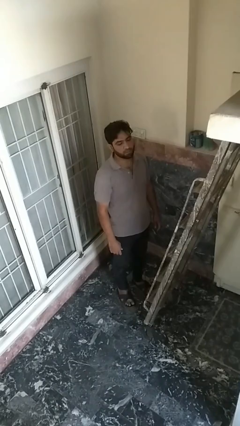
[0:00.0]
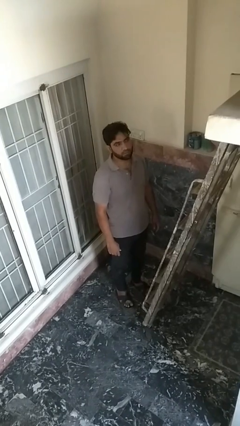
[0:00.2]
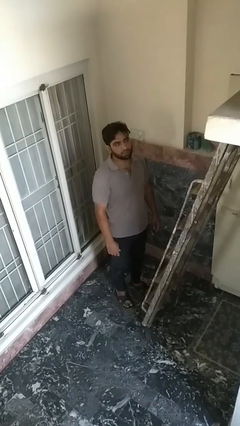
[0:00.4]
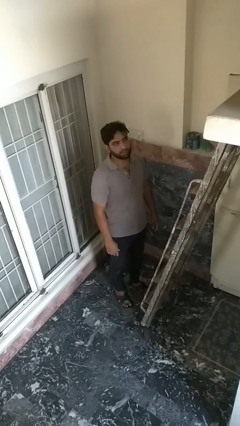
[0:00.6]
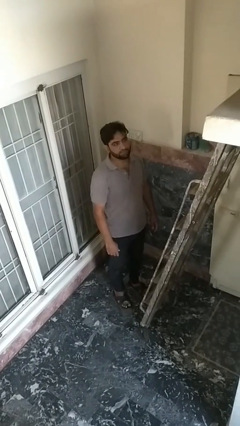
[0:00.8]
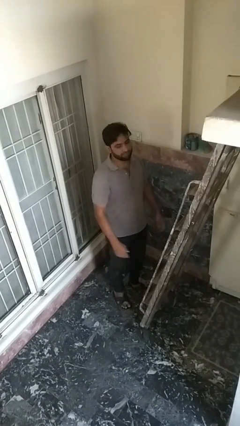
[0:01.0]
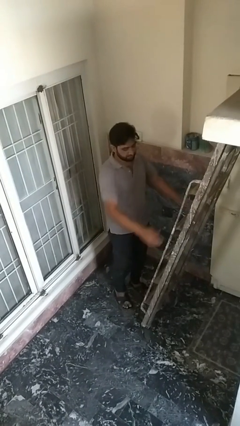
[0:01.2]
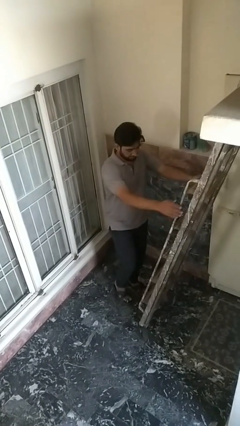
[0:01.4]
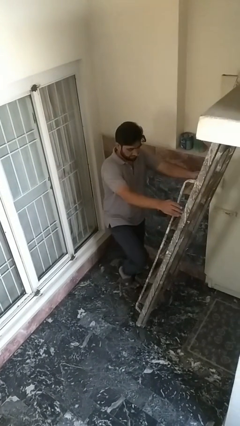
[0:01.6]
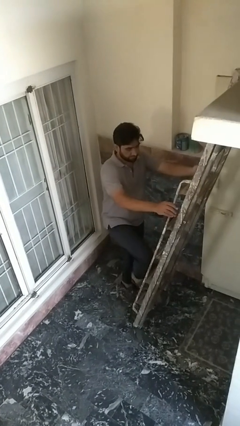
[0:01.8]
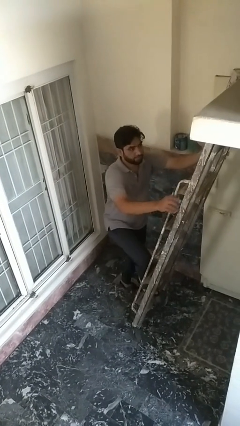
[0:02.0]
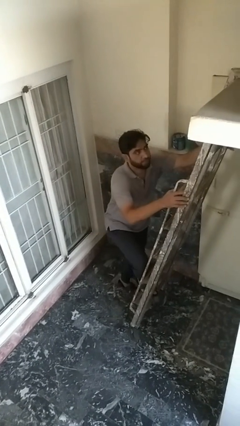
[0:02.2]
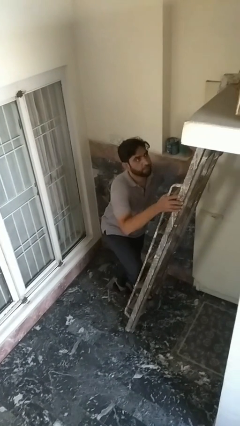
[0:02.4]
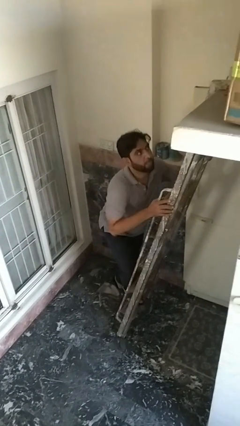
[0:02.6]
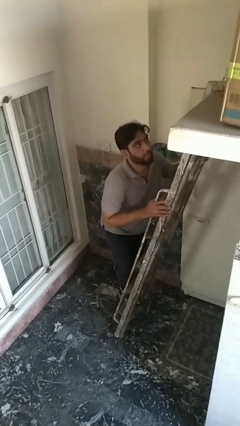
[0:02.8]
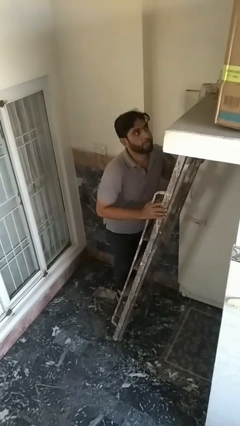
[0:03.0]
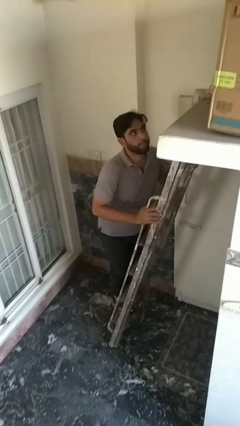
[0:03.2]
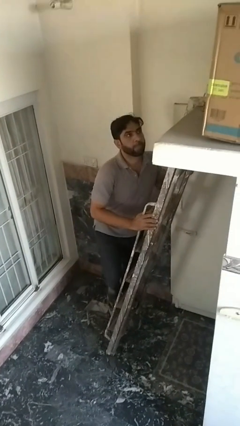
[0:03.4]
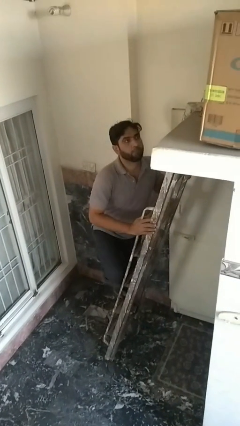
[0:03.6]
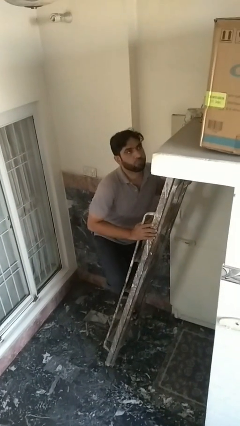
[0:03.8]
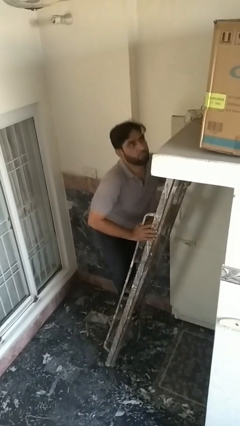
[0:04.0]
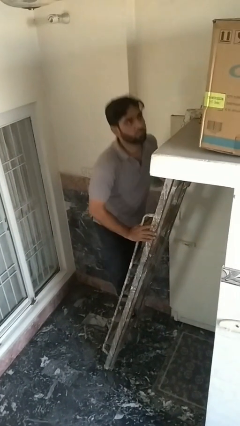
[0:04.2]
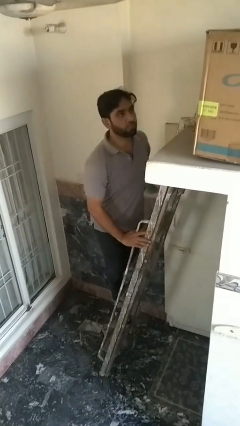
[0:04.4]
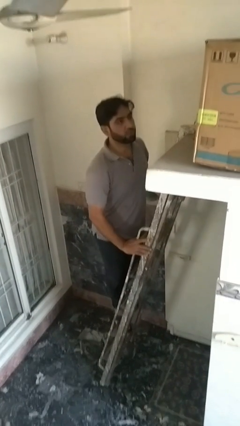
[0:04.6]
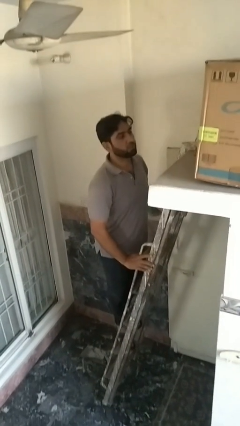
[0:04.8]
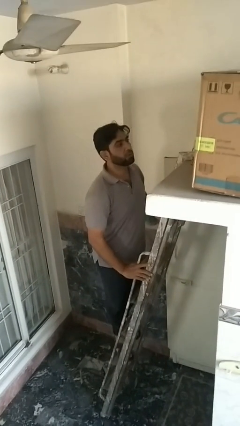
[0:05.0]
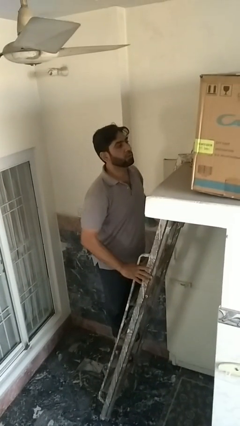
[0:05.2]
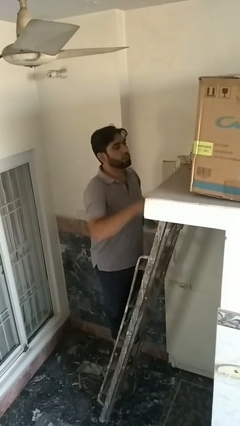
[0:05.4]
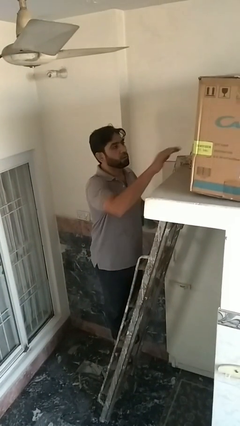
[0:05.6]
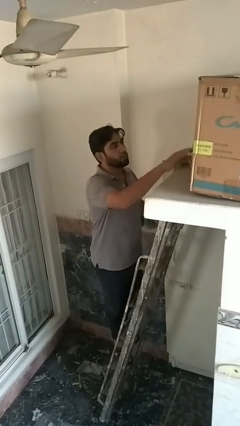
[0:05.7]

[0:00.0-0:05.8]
person climbs up ladder

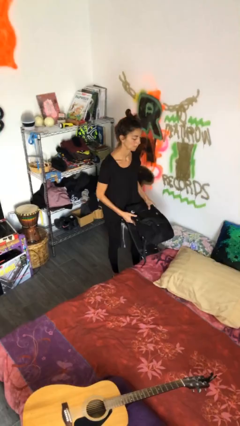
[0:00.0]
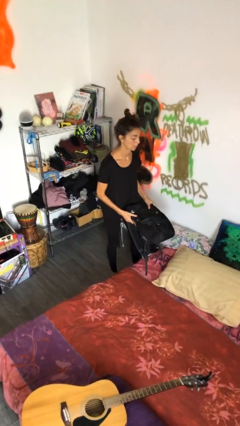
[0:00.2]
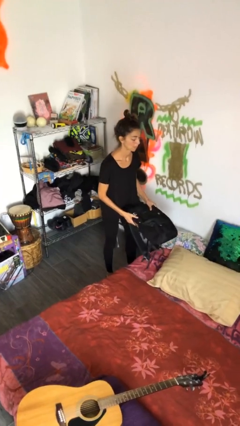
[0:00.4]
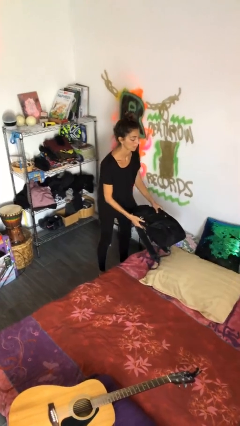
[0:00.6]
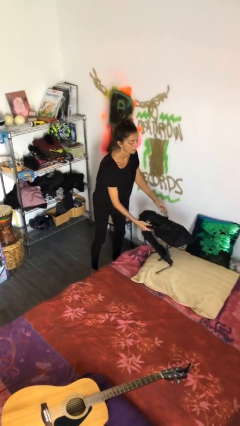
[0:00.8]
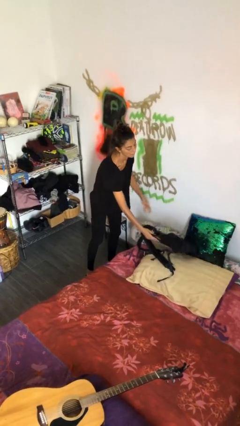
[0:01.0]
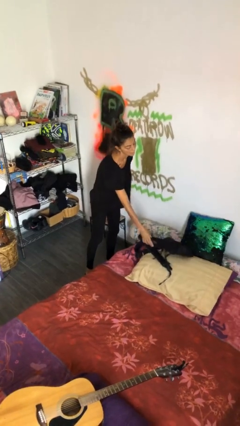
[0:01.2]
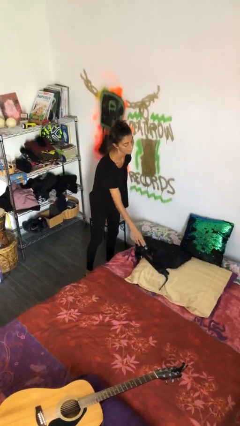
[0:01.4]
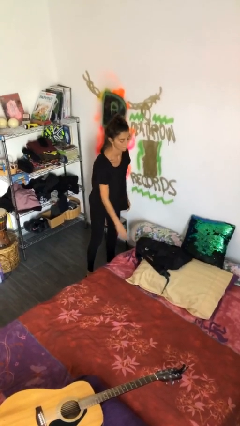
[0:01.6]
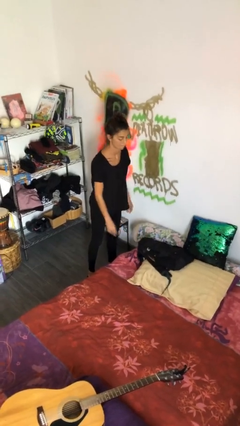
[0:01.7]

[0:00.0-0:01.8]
person puts down object on bed

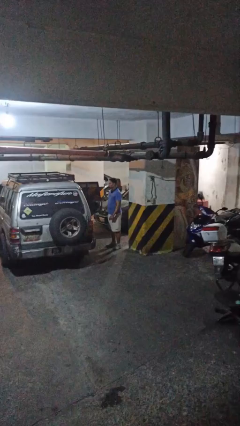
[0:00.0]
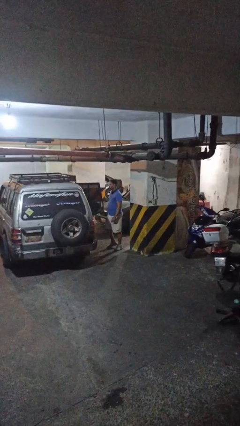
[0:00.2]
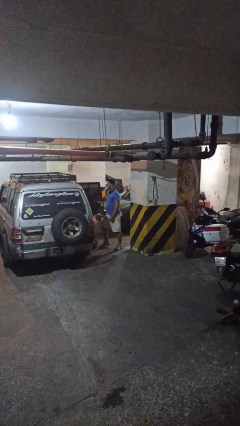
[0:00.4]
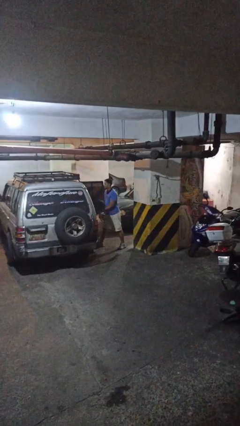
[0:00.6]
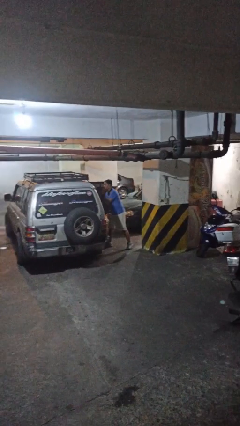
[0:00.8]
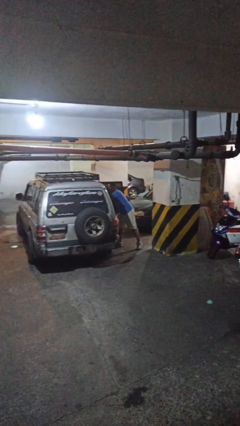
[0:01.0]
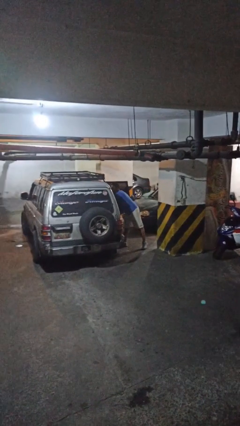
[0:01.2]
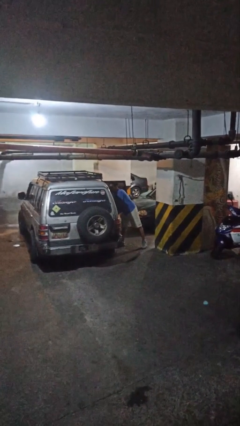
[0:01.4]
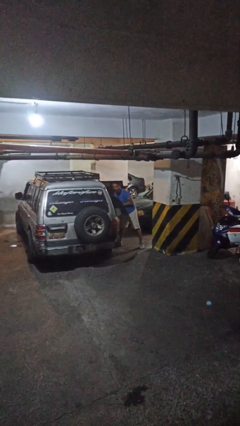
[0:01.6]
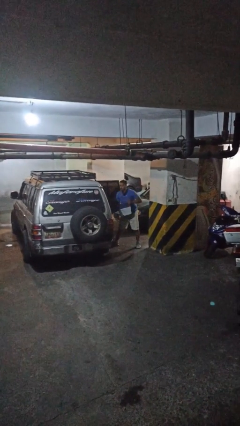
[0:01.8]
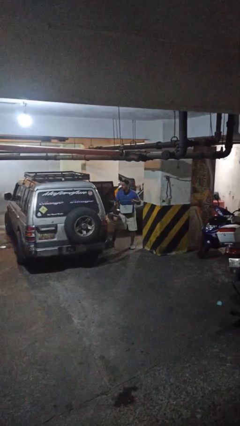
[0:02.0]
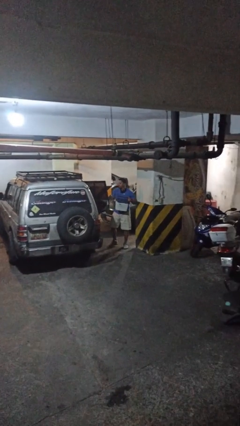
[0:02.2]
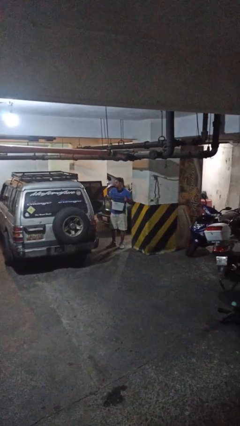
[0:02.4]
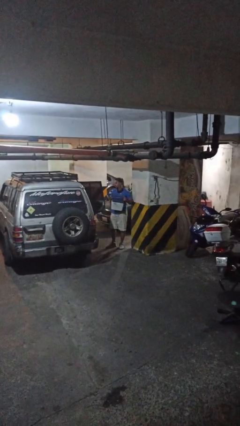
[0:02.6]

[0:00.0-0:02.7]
person unloads car

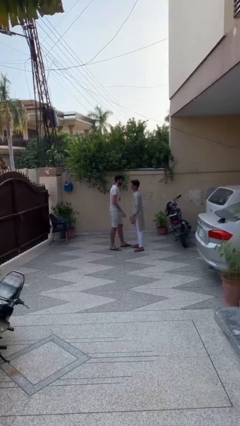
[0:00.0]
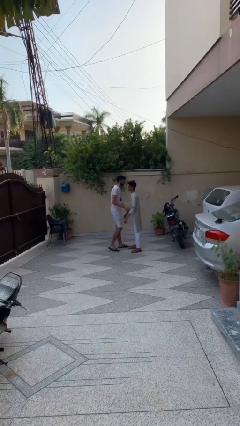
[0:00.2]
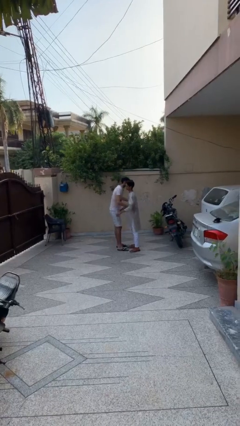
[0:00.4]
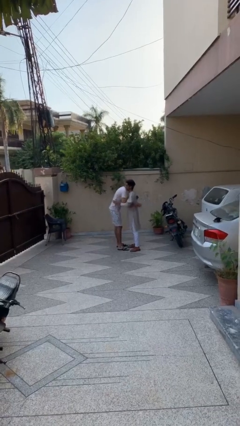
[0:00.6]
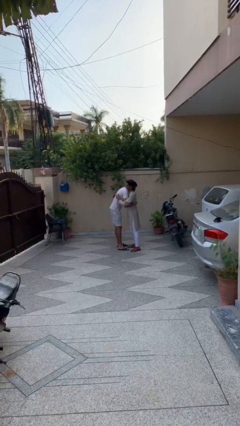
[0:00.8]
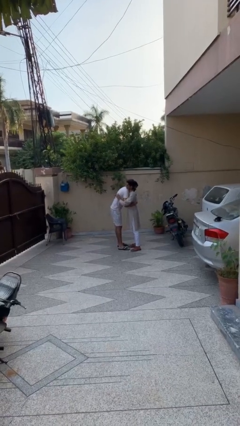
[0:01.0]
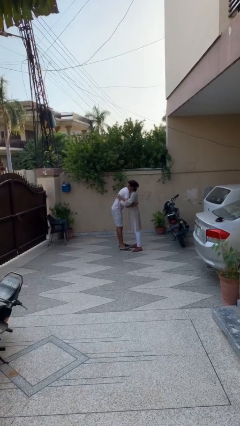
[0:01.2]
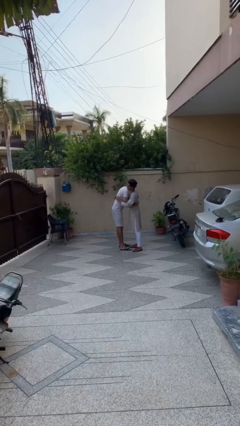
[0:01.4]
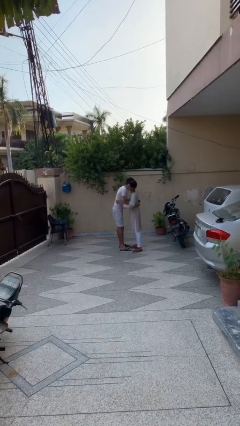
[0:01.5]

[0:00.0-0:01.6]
person embraces person

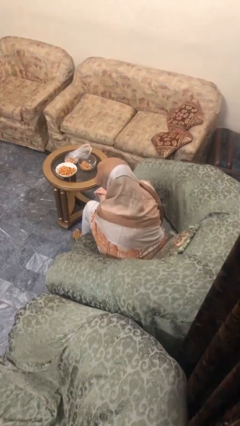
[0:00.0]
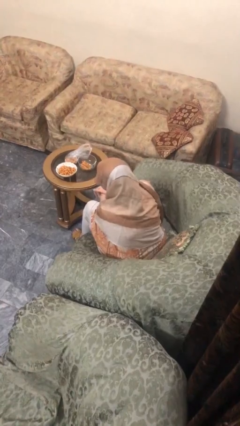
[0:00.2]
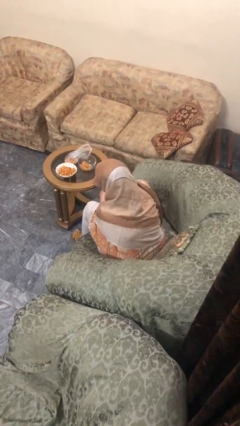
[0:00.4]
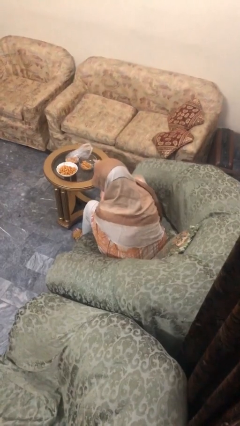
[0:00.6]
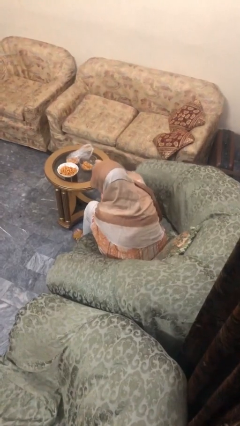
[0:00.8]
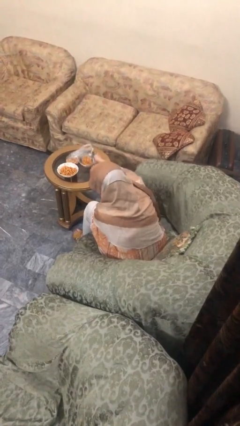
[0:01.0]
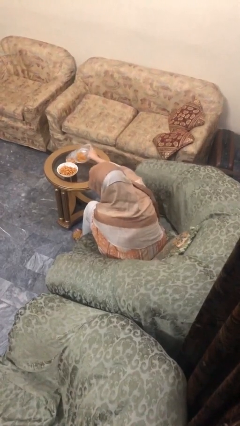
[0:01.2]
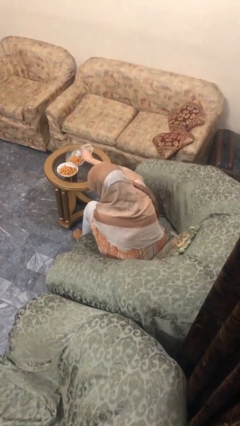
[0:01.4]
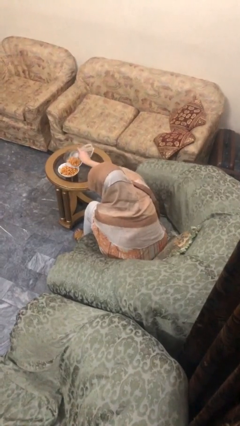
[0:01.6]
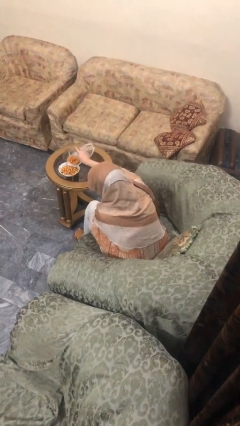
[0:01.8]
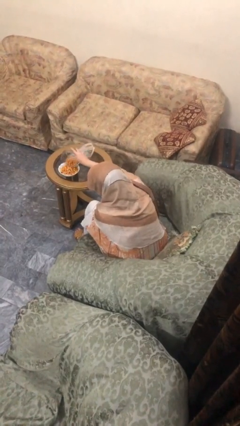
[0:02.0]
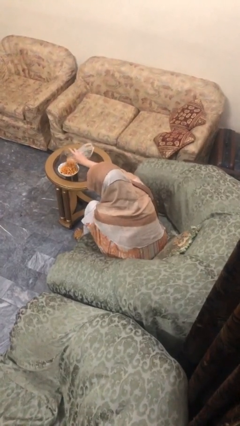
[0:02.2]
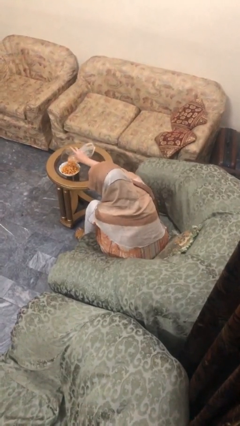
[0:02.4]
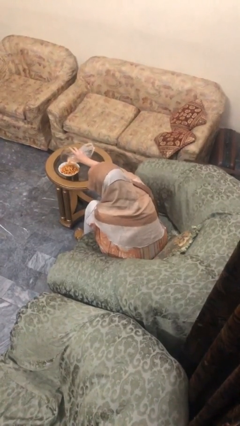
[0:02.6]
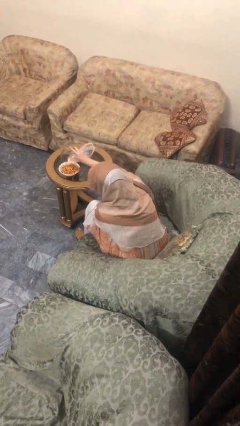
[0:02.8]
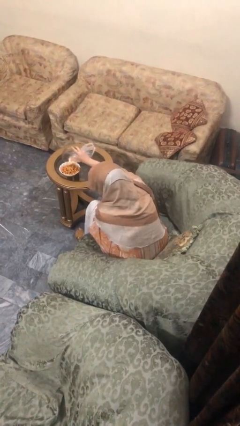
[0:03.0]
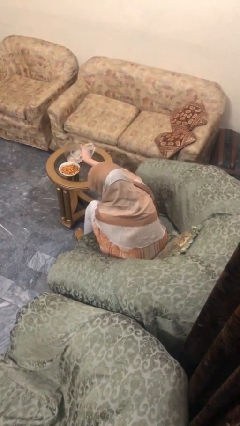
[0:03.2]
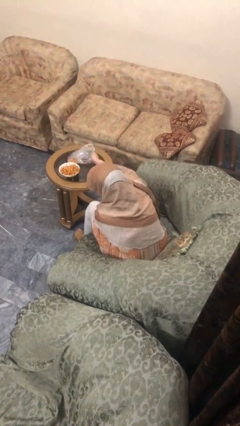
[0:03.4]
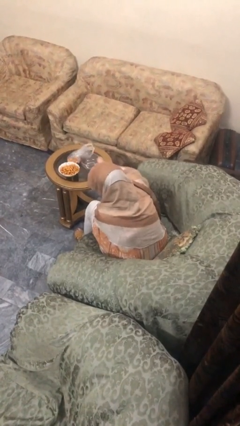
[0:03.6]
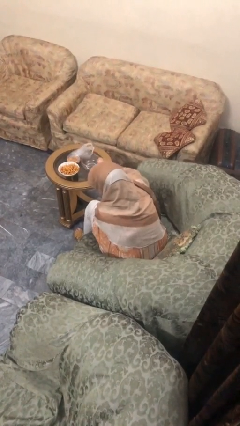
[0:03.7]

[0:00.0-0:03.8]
person pours into bowl

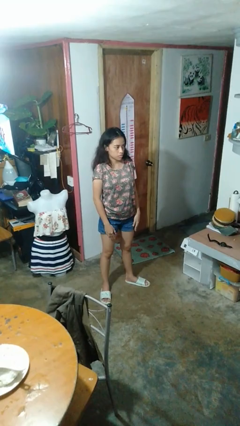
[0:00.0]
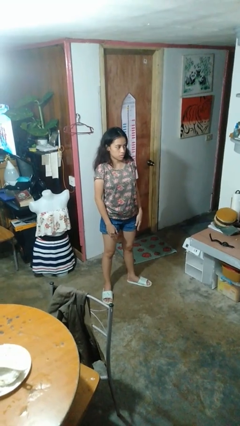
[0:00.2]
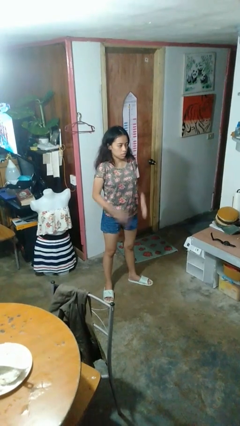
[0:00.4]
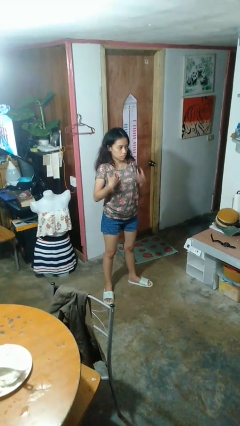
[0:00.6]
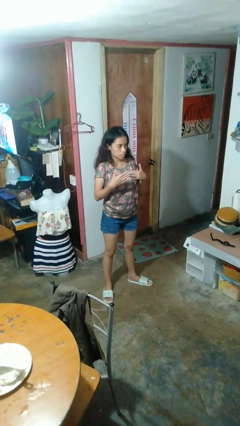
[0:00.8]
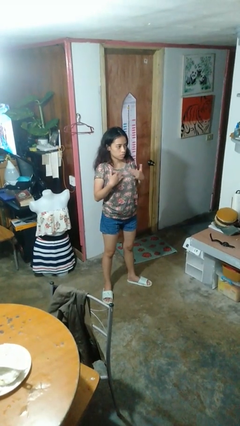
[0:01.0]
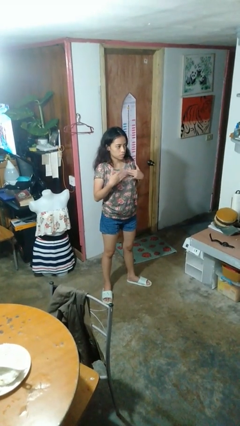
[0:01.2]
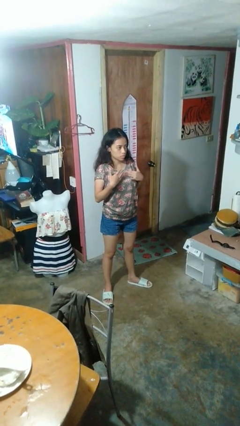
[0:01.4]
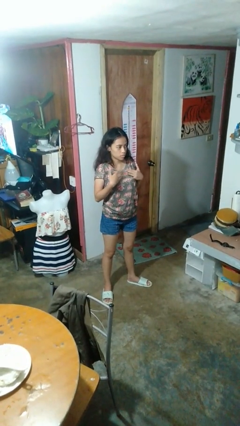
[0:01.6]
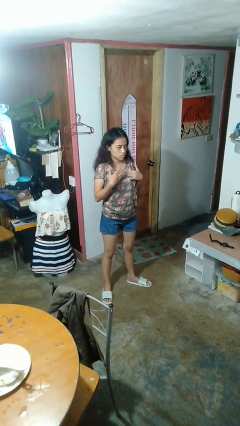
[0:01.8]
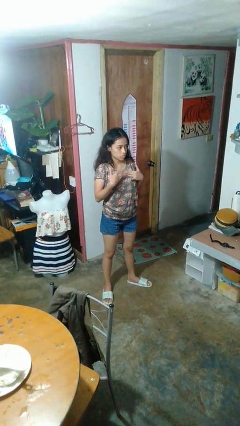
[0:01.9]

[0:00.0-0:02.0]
person drums on chest
